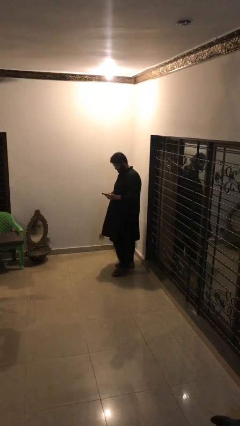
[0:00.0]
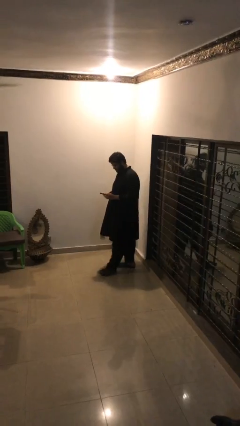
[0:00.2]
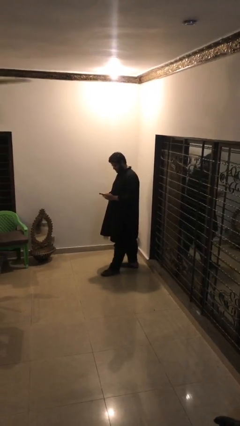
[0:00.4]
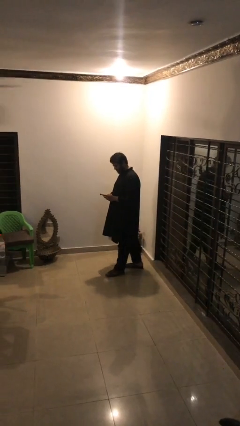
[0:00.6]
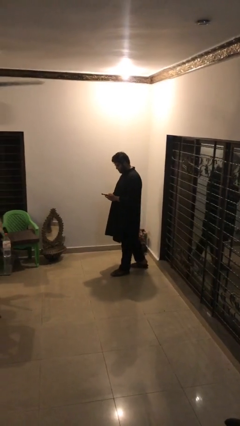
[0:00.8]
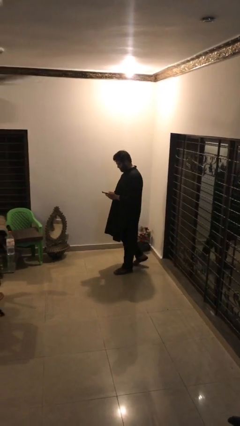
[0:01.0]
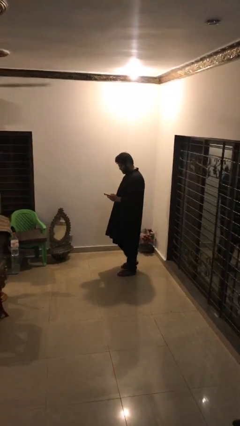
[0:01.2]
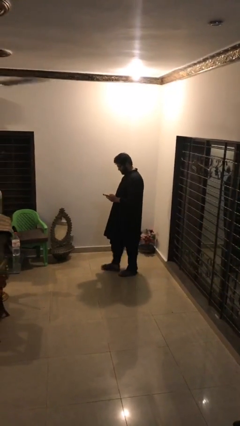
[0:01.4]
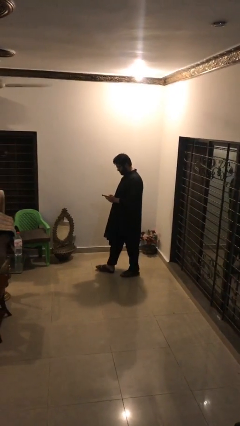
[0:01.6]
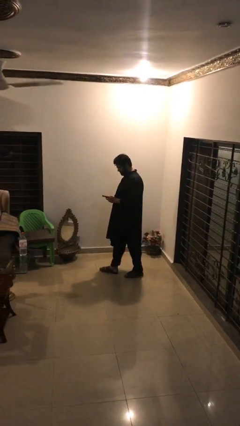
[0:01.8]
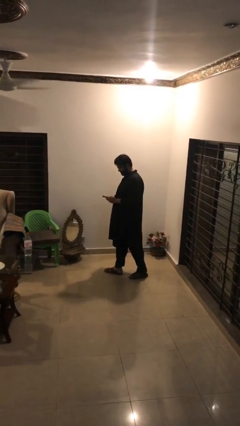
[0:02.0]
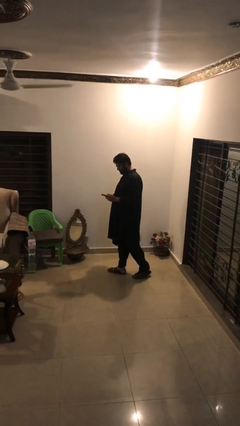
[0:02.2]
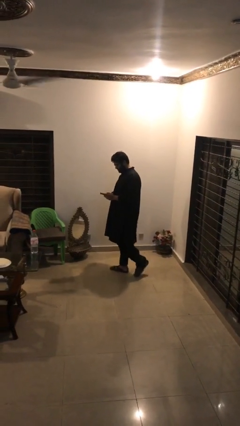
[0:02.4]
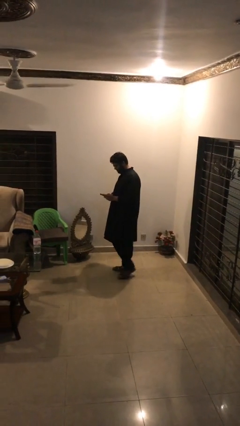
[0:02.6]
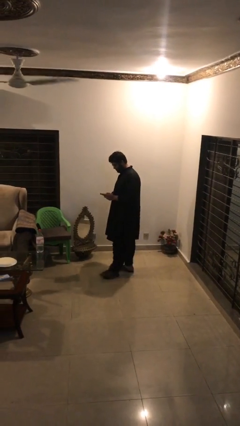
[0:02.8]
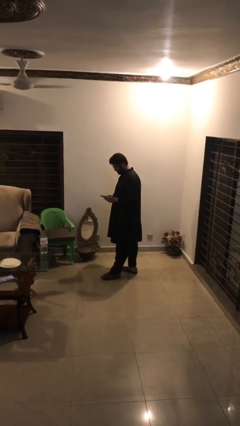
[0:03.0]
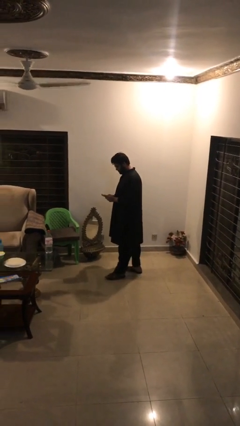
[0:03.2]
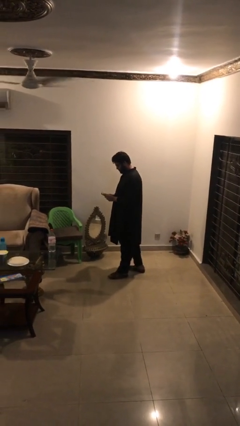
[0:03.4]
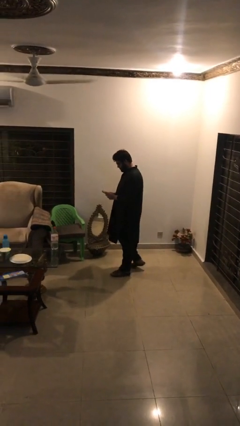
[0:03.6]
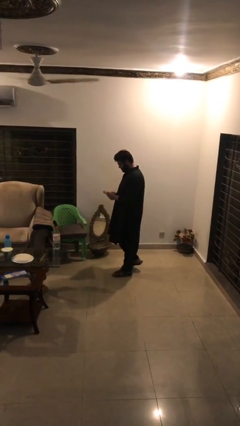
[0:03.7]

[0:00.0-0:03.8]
person texts on phone

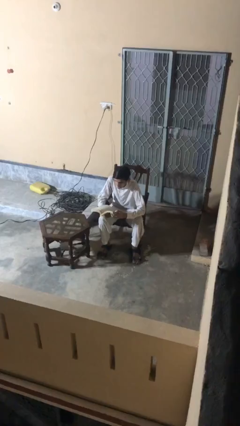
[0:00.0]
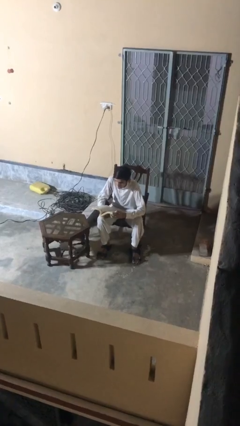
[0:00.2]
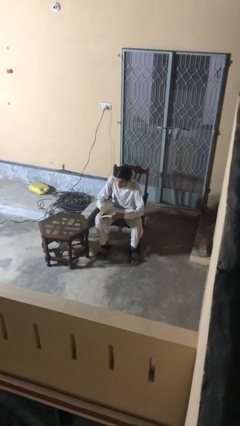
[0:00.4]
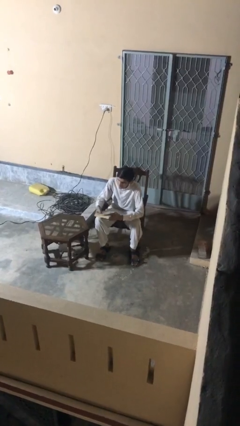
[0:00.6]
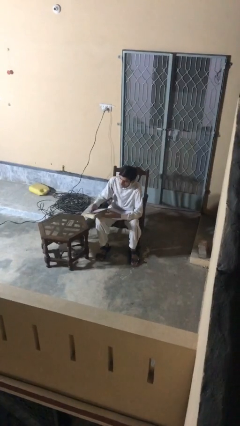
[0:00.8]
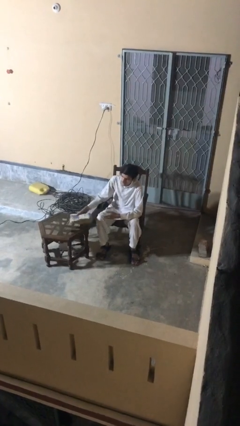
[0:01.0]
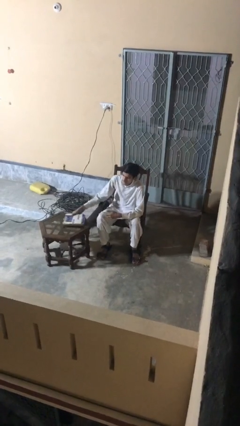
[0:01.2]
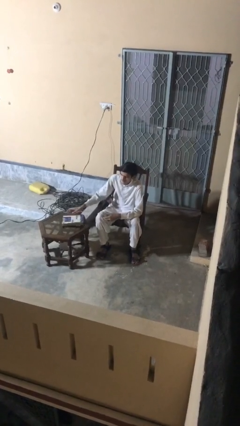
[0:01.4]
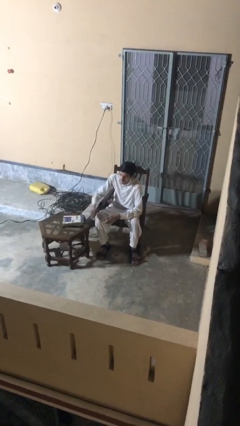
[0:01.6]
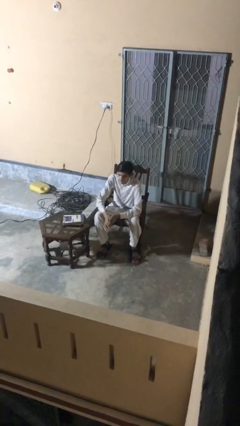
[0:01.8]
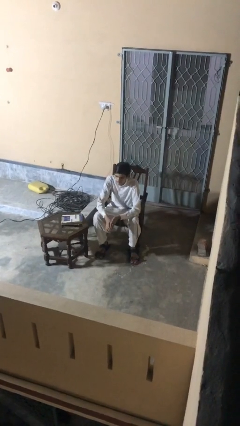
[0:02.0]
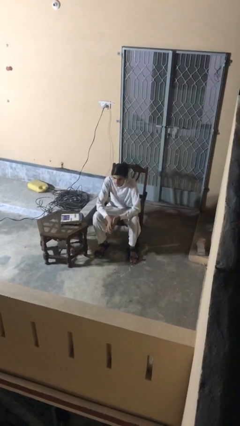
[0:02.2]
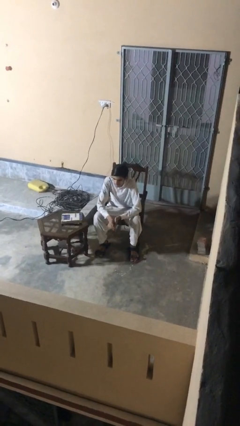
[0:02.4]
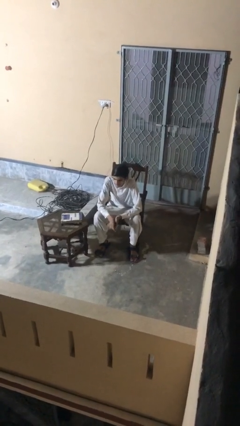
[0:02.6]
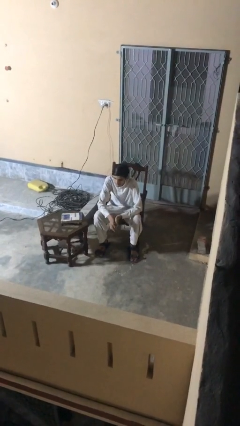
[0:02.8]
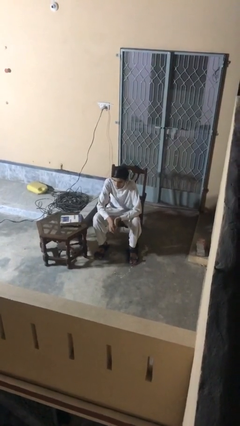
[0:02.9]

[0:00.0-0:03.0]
person puts down object on table

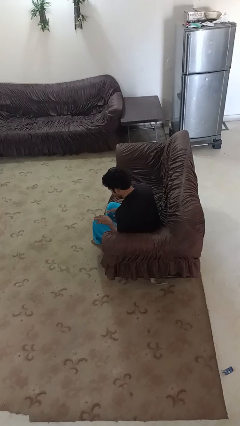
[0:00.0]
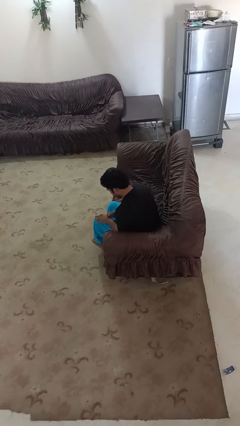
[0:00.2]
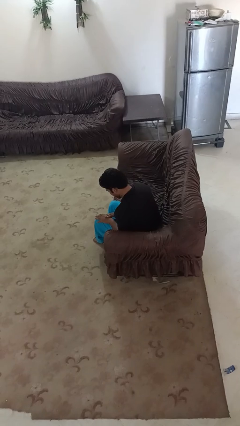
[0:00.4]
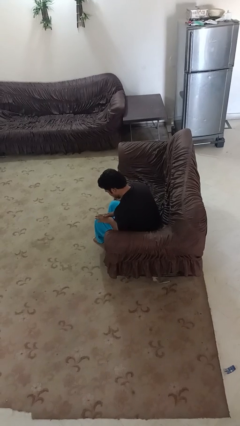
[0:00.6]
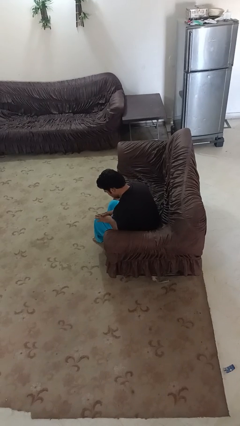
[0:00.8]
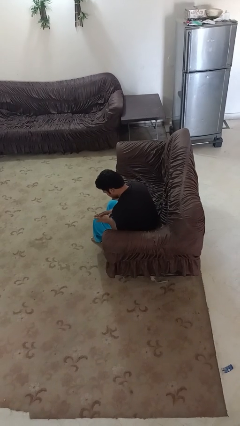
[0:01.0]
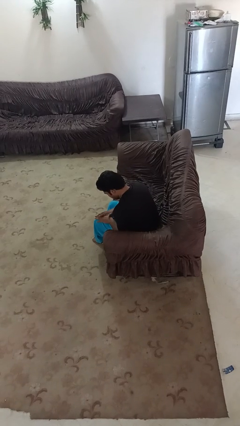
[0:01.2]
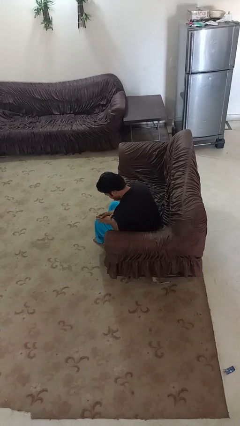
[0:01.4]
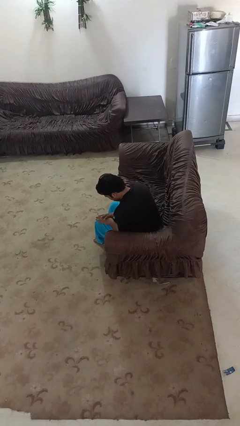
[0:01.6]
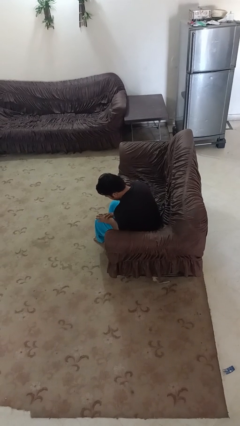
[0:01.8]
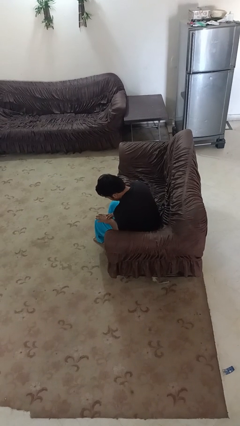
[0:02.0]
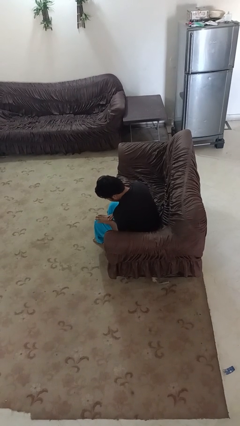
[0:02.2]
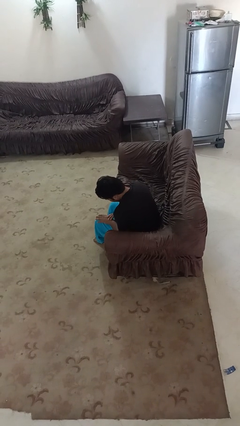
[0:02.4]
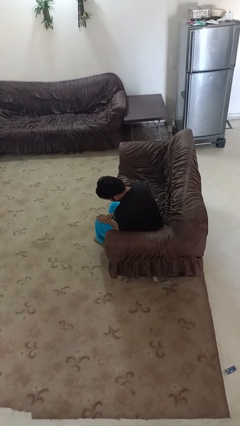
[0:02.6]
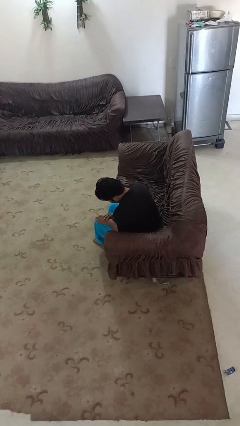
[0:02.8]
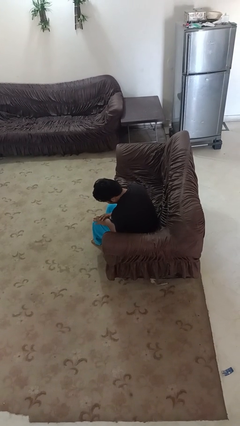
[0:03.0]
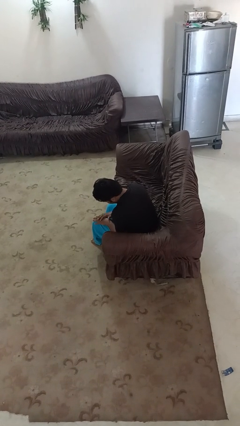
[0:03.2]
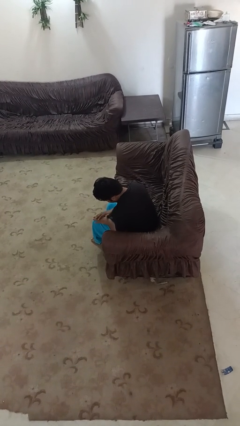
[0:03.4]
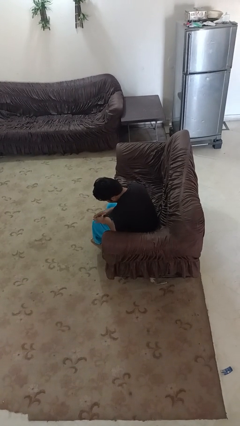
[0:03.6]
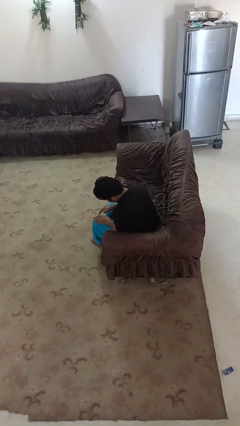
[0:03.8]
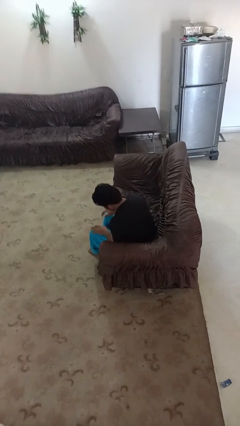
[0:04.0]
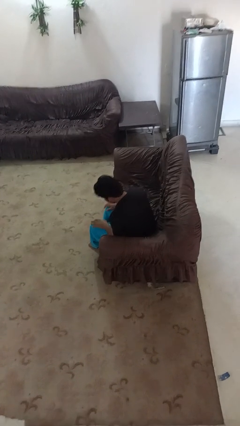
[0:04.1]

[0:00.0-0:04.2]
person looks at hands in lap

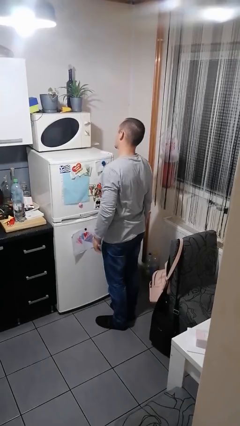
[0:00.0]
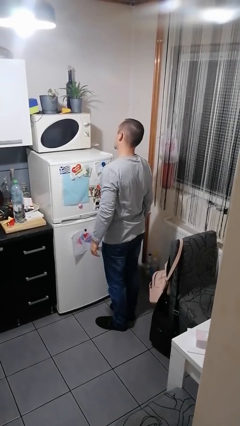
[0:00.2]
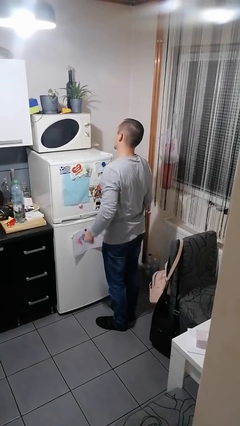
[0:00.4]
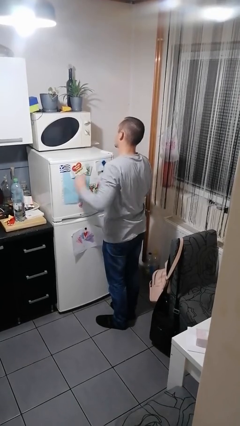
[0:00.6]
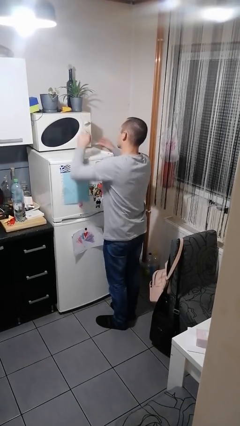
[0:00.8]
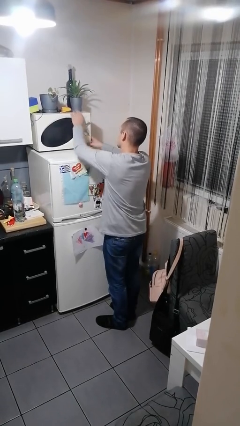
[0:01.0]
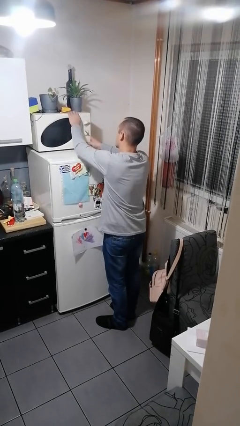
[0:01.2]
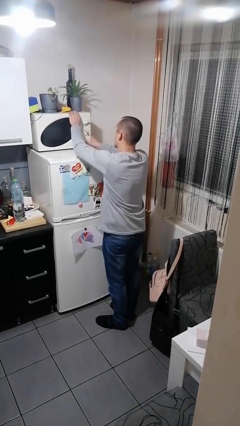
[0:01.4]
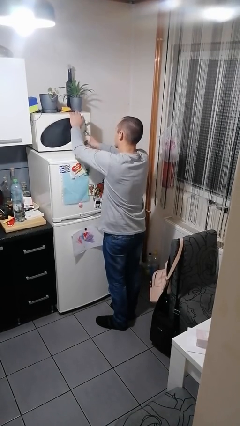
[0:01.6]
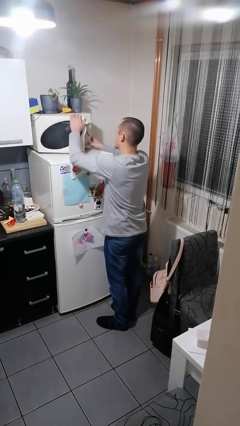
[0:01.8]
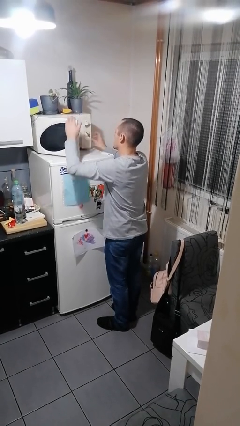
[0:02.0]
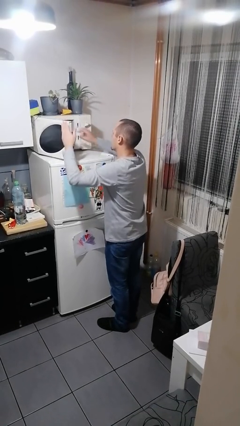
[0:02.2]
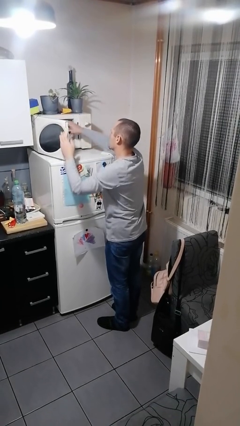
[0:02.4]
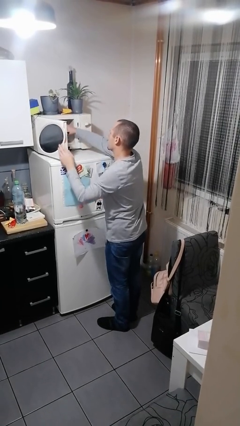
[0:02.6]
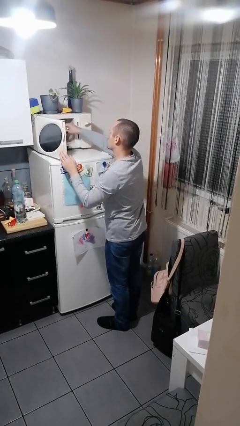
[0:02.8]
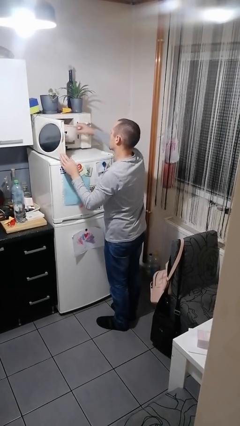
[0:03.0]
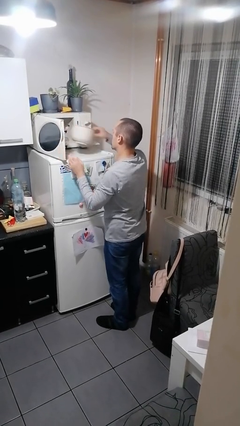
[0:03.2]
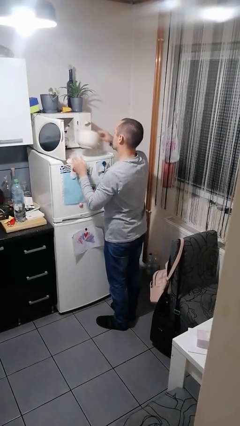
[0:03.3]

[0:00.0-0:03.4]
person takes object from microwave

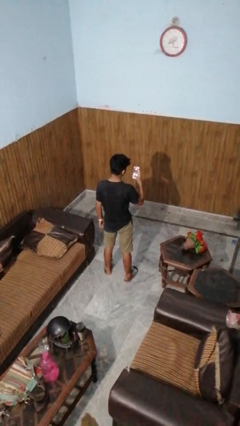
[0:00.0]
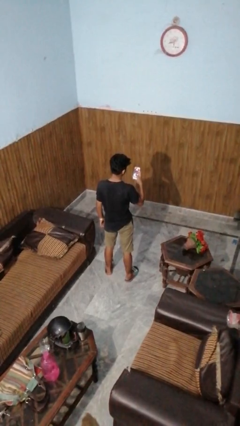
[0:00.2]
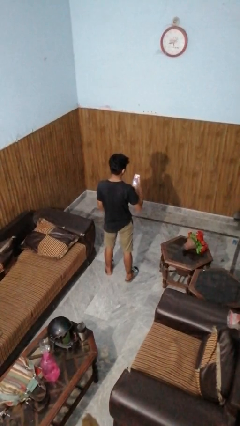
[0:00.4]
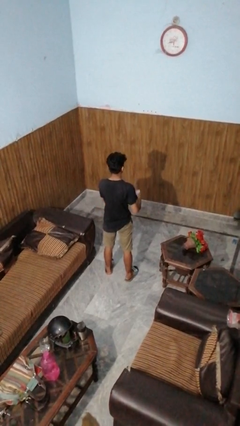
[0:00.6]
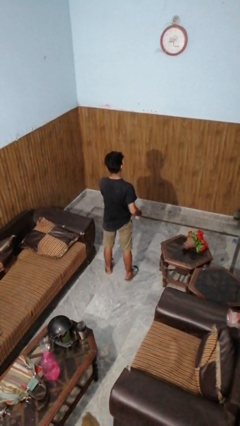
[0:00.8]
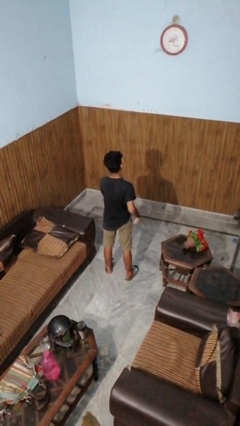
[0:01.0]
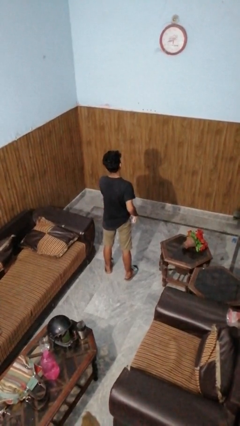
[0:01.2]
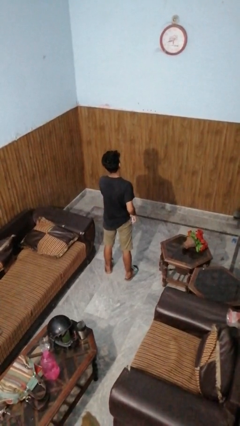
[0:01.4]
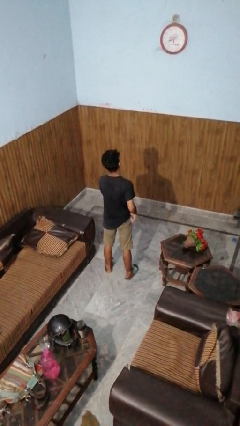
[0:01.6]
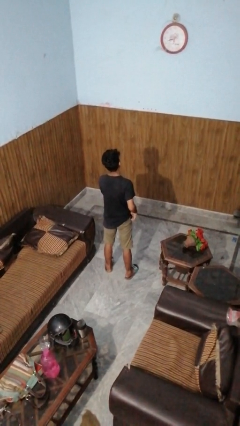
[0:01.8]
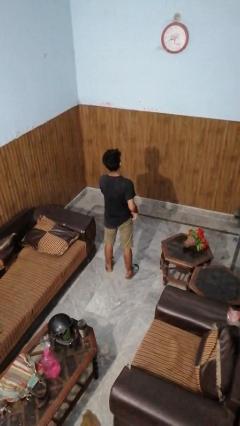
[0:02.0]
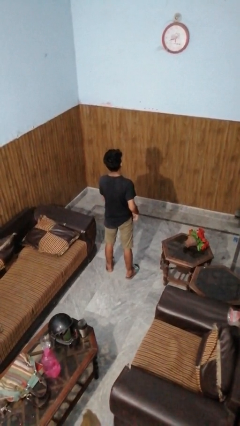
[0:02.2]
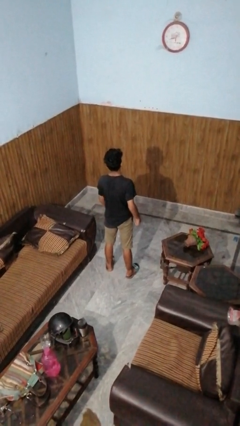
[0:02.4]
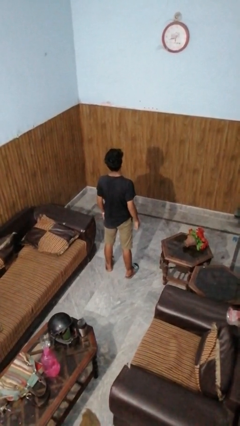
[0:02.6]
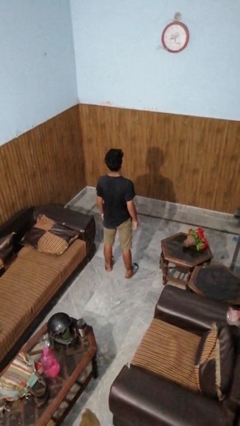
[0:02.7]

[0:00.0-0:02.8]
person puts phone into pocket
